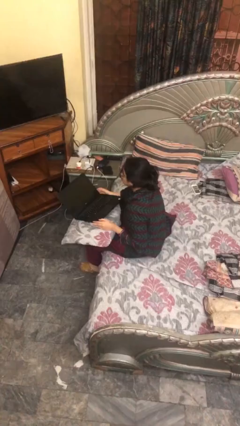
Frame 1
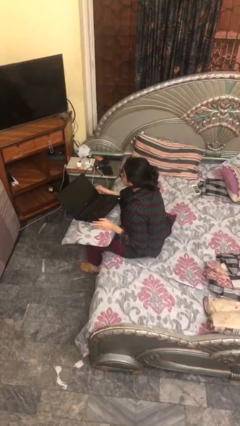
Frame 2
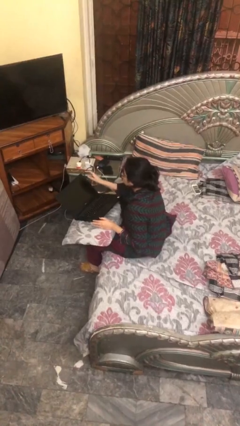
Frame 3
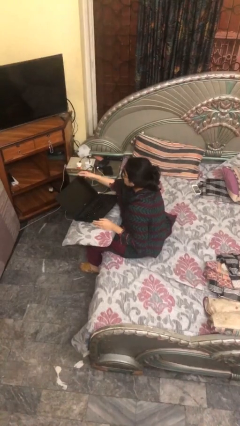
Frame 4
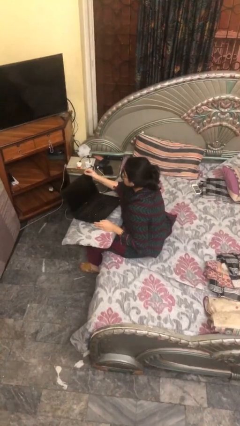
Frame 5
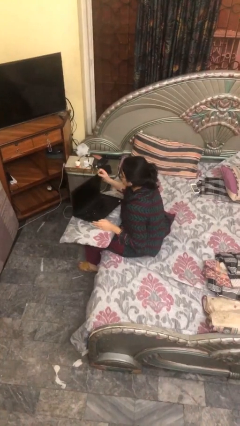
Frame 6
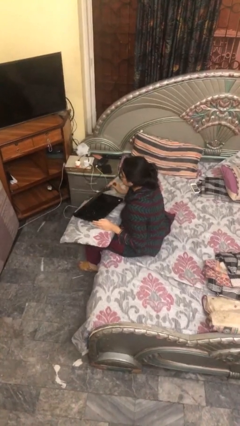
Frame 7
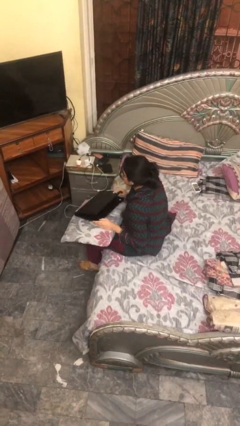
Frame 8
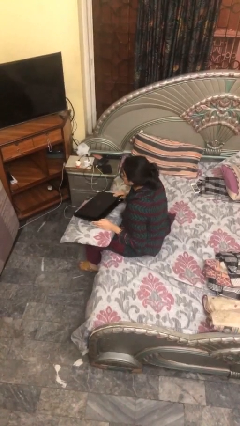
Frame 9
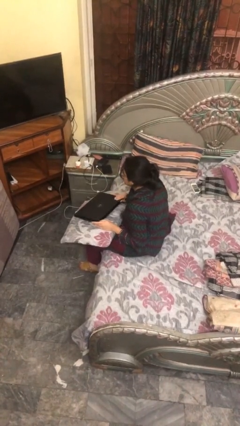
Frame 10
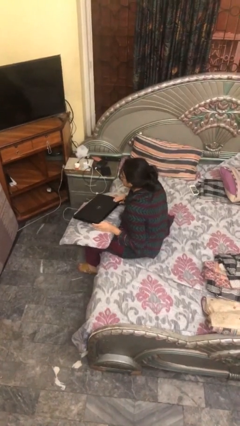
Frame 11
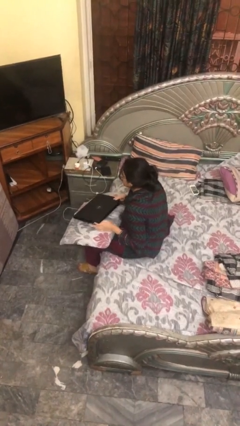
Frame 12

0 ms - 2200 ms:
person closes laptop

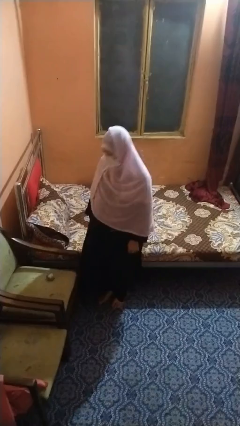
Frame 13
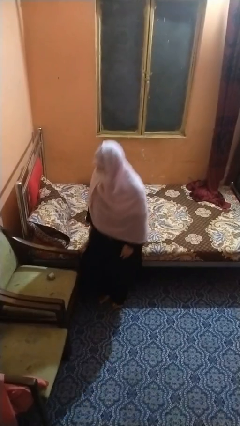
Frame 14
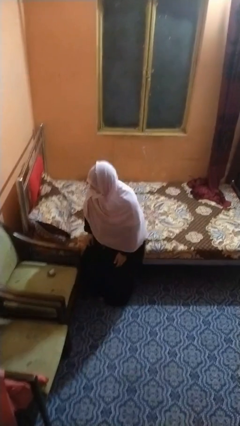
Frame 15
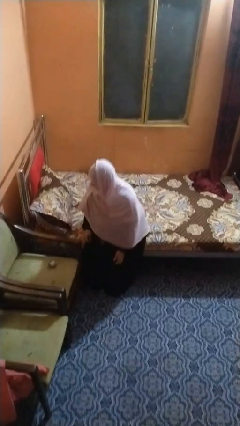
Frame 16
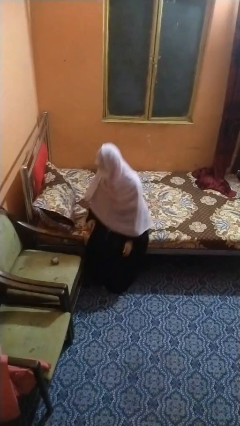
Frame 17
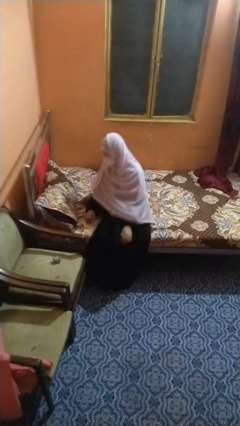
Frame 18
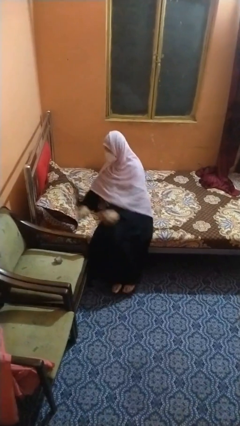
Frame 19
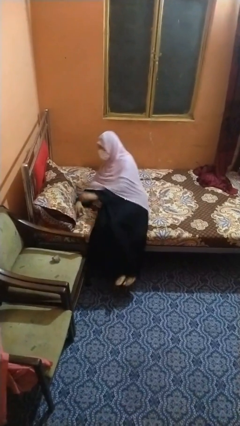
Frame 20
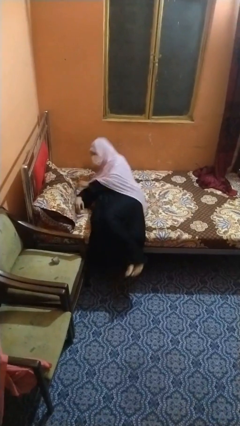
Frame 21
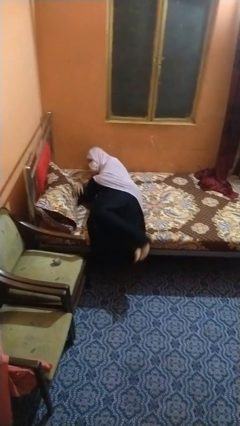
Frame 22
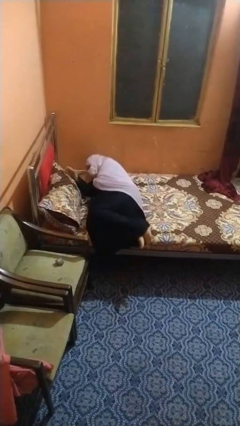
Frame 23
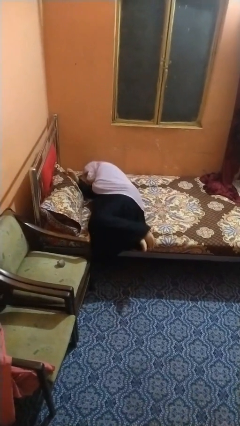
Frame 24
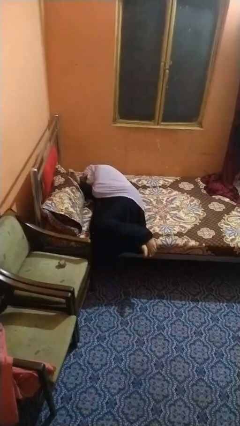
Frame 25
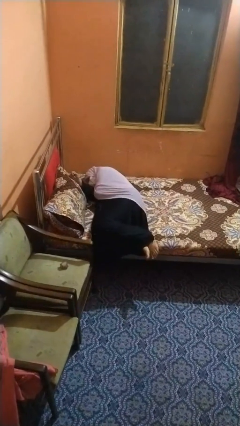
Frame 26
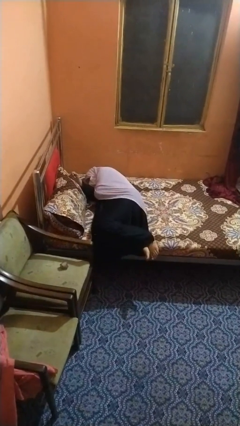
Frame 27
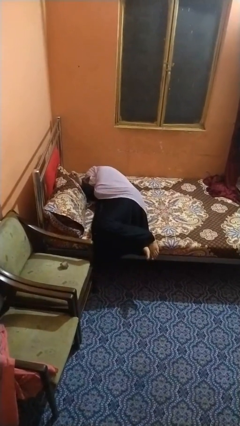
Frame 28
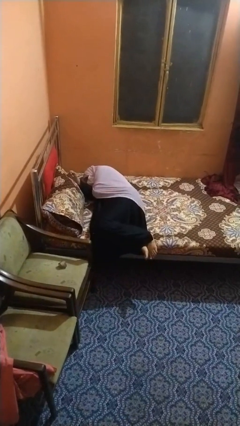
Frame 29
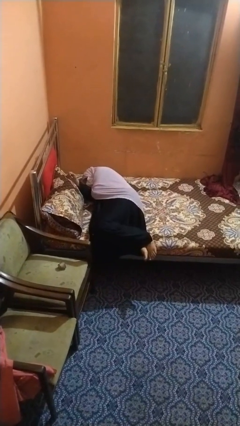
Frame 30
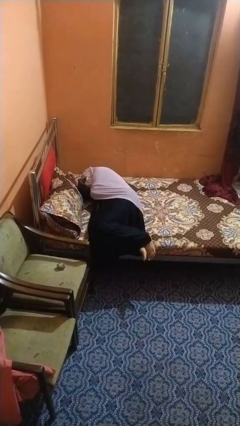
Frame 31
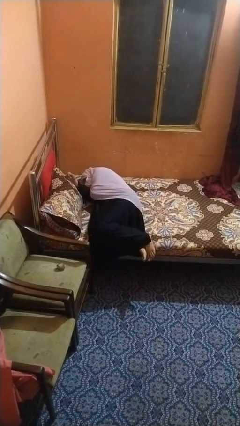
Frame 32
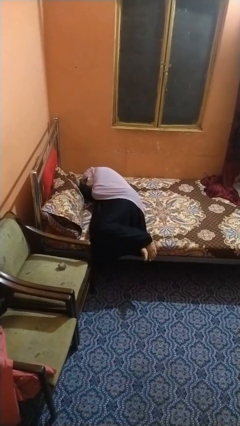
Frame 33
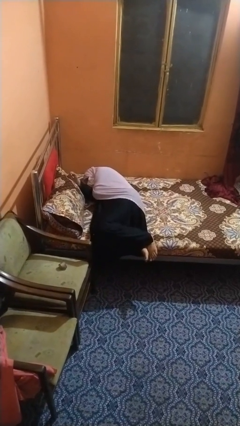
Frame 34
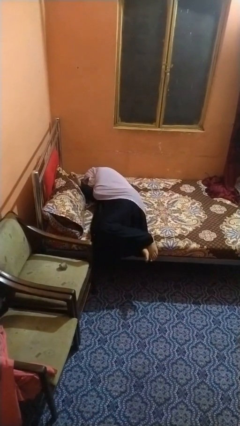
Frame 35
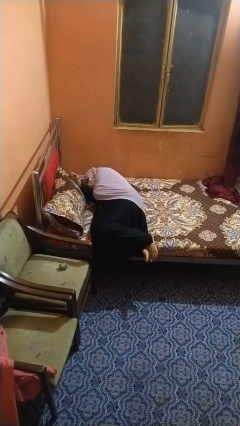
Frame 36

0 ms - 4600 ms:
person lies down on bed

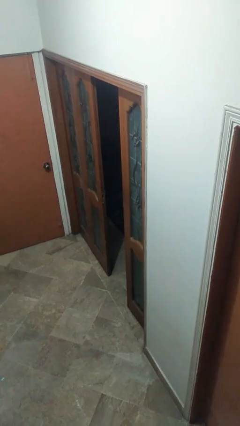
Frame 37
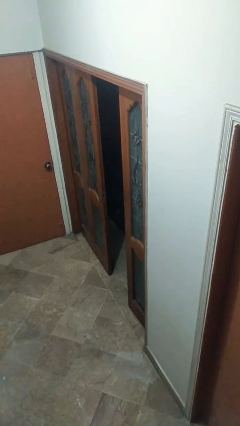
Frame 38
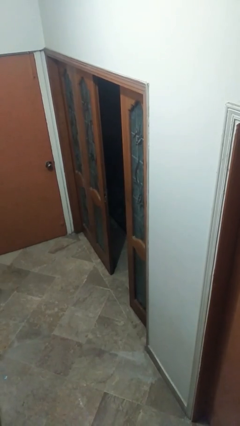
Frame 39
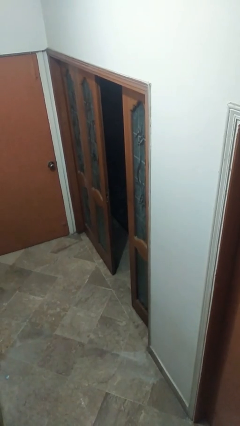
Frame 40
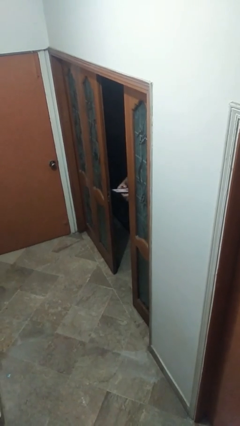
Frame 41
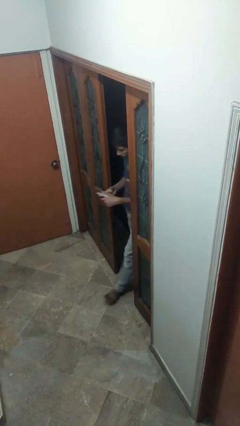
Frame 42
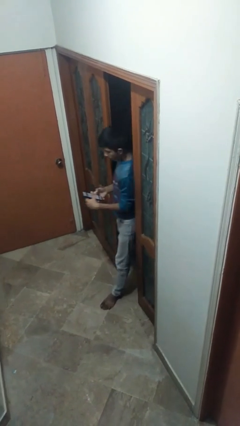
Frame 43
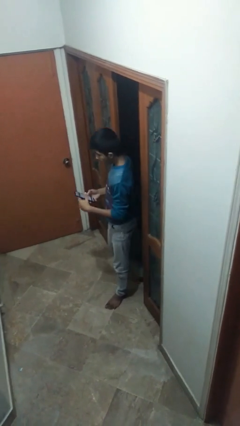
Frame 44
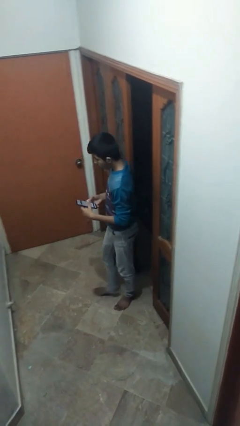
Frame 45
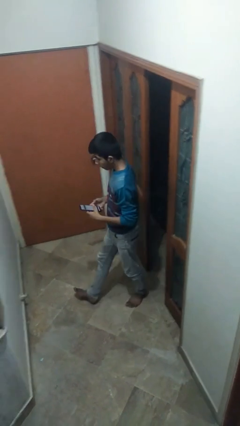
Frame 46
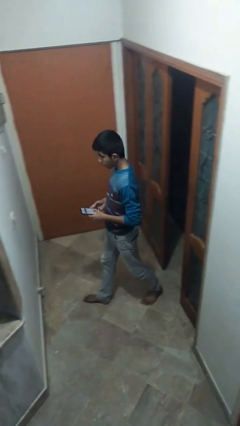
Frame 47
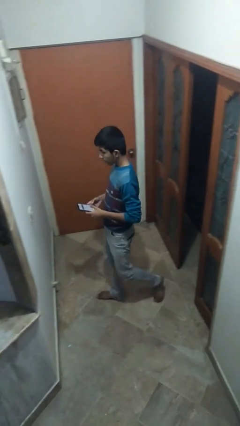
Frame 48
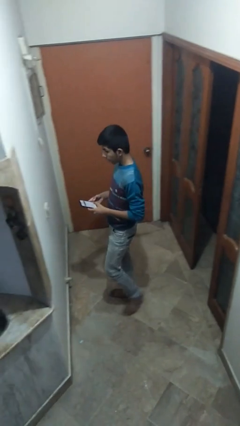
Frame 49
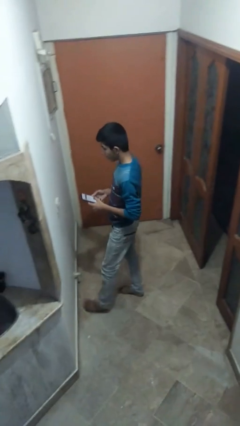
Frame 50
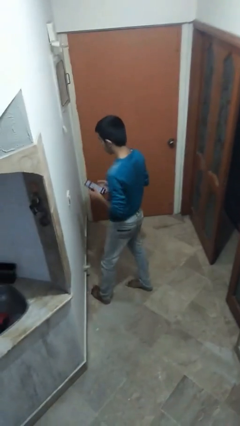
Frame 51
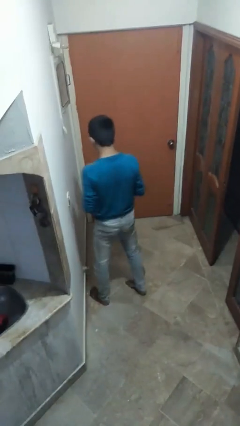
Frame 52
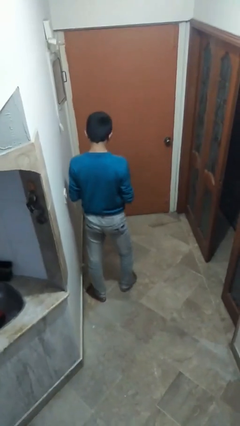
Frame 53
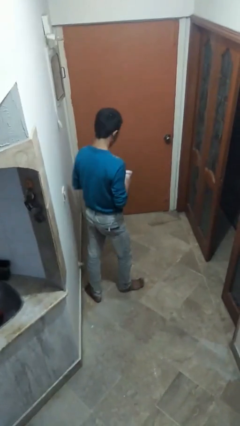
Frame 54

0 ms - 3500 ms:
person enters scene through structure

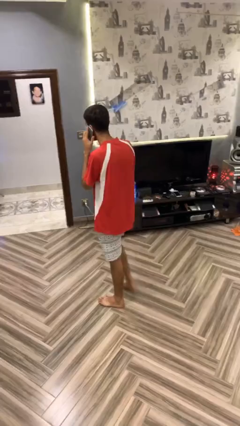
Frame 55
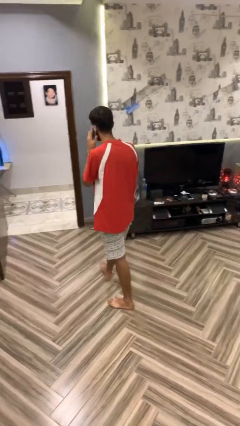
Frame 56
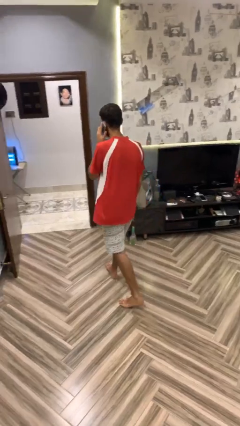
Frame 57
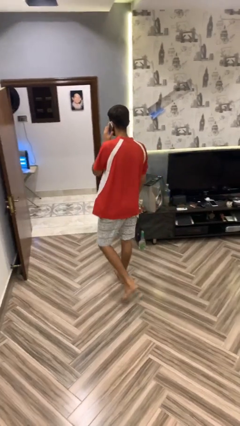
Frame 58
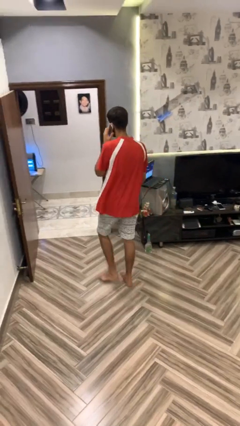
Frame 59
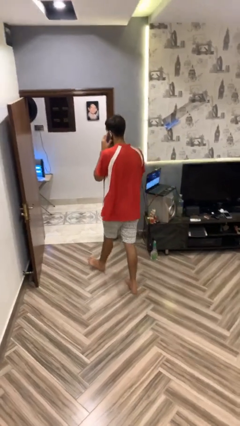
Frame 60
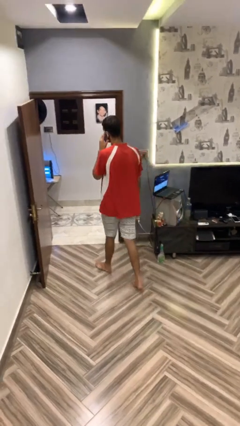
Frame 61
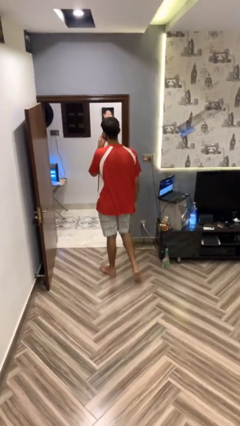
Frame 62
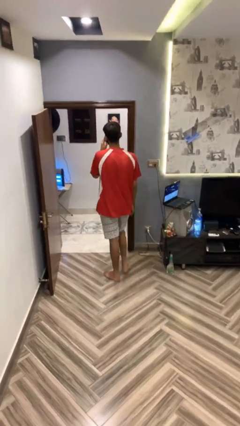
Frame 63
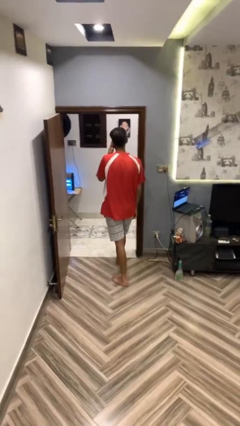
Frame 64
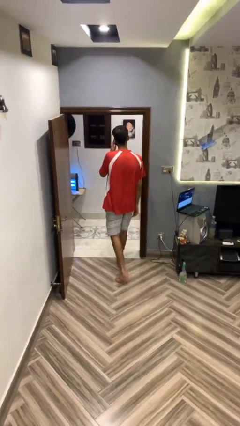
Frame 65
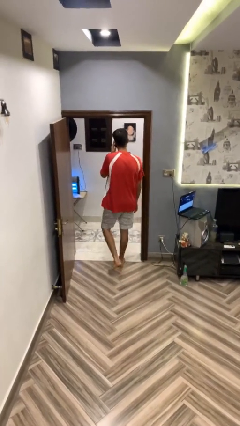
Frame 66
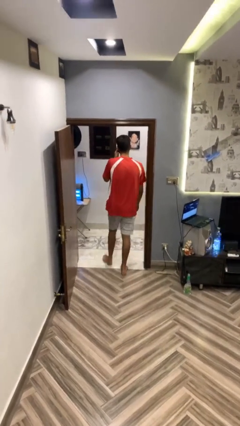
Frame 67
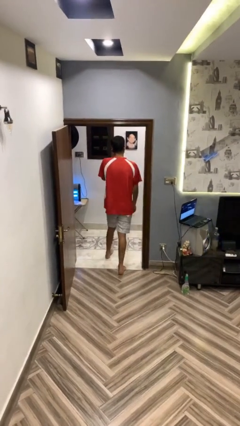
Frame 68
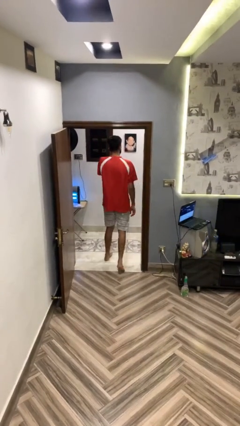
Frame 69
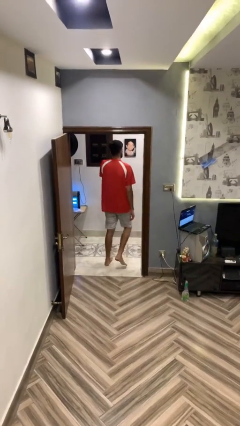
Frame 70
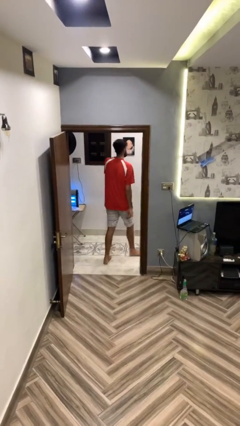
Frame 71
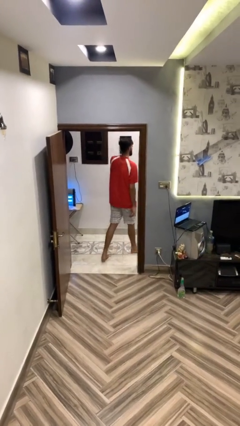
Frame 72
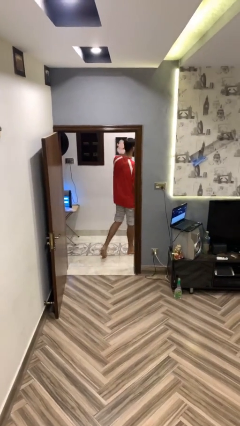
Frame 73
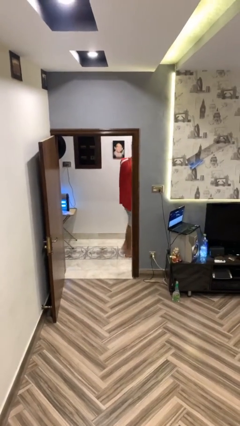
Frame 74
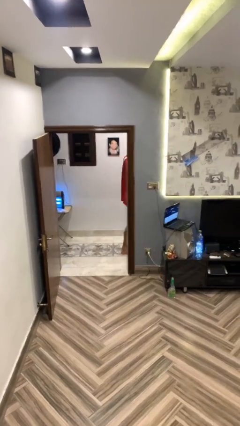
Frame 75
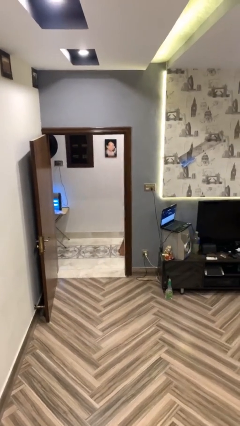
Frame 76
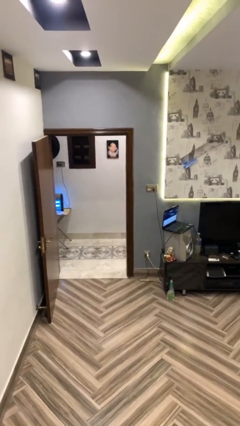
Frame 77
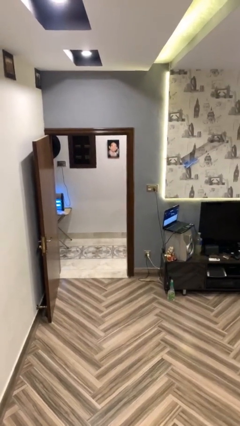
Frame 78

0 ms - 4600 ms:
person exits scene through structure

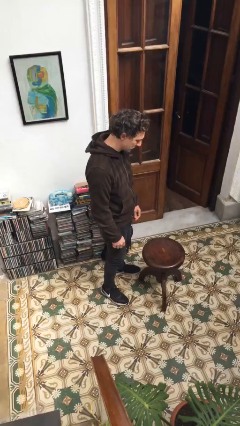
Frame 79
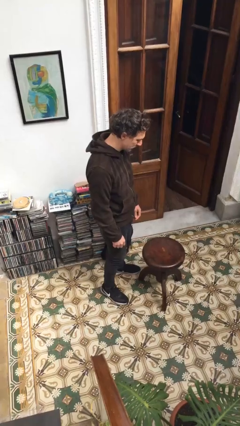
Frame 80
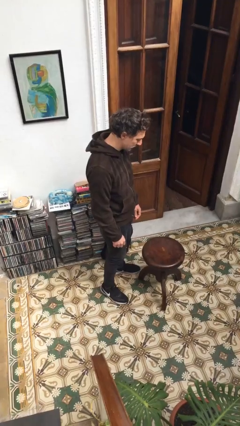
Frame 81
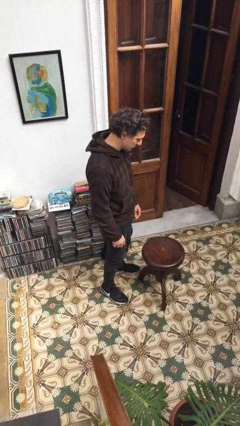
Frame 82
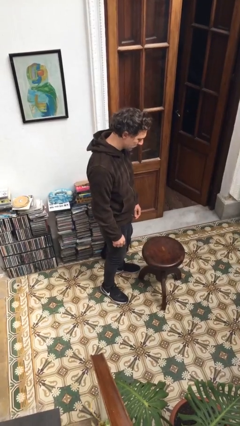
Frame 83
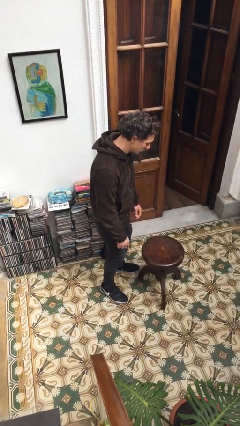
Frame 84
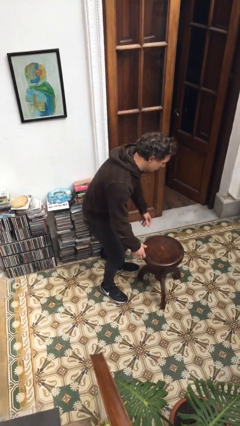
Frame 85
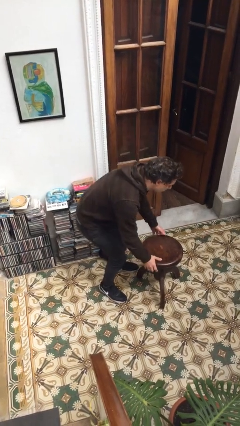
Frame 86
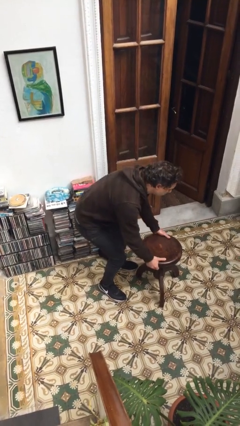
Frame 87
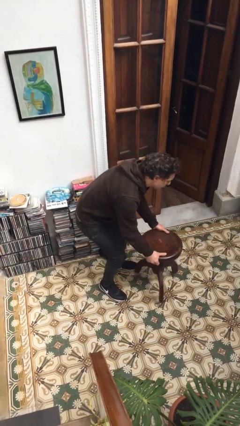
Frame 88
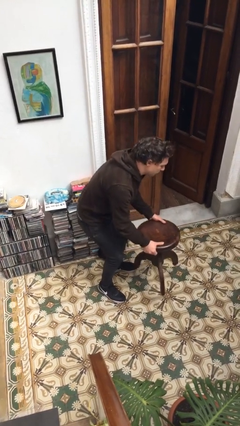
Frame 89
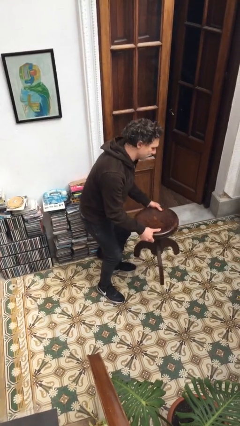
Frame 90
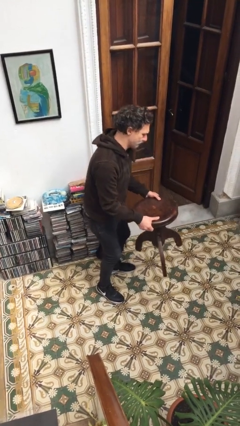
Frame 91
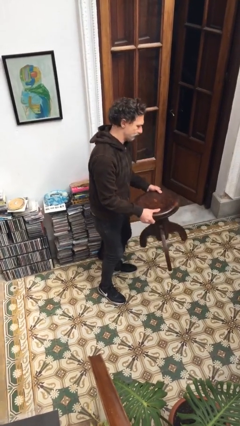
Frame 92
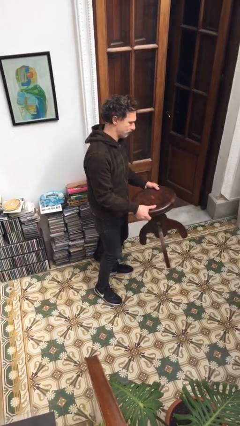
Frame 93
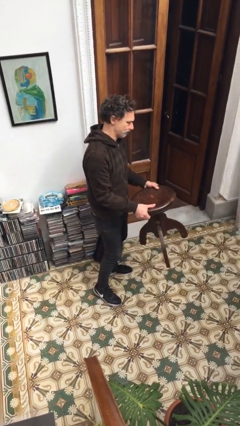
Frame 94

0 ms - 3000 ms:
person picks up object from floor

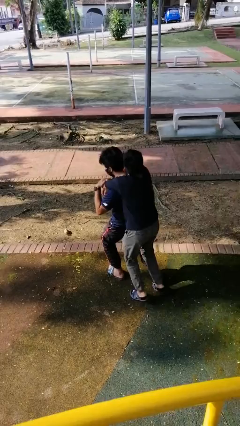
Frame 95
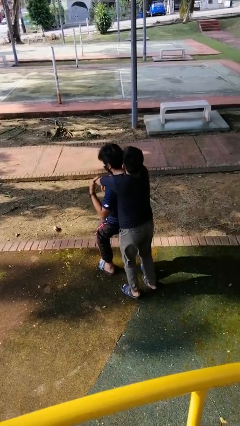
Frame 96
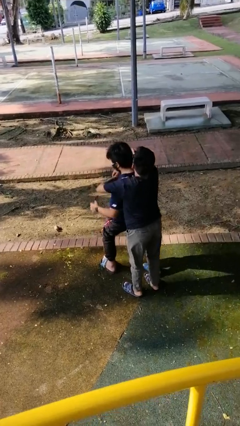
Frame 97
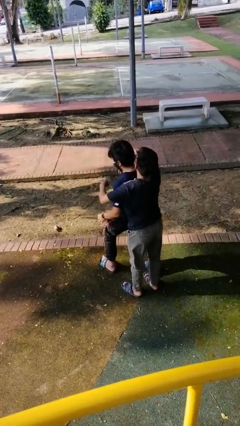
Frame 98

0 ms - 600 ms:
person puts down person
